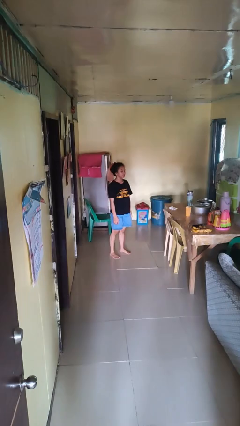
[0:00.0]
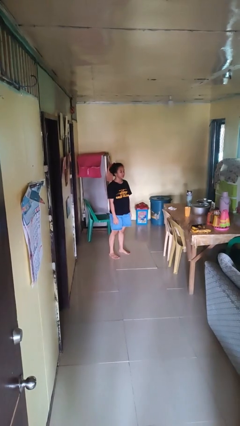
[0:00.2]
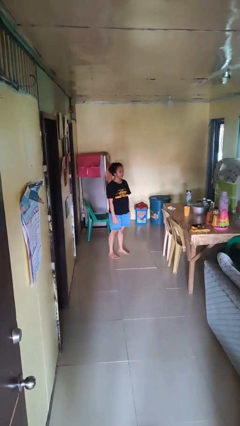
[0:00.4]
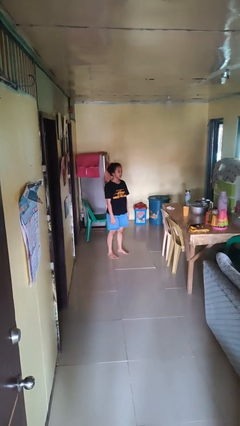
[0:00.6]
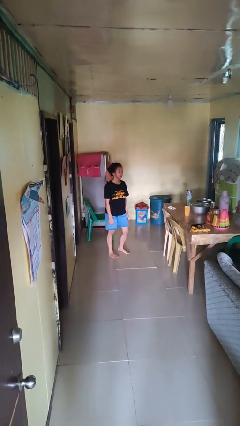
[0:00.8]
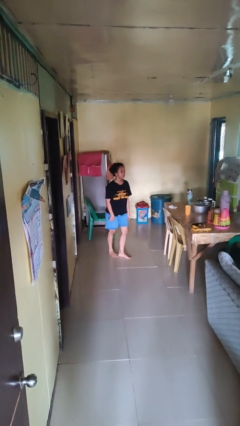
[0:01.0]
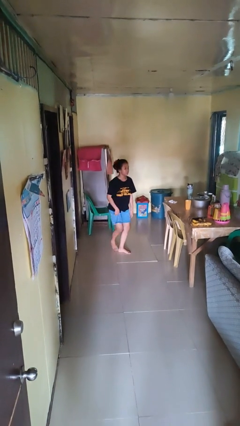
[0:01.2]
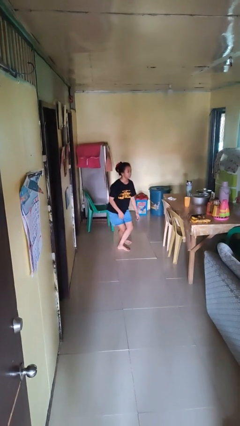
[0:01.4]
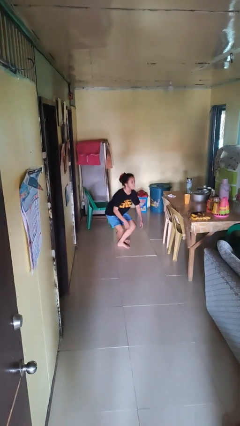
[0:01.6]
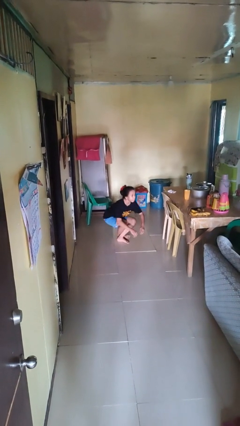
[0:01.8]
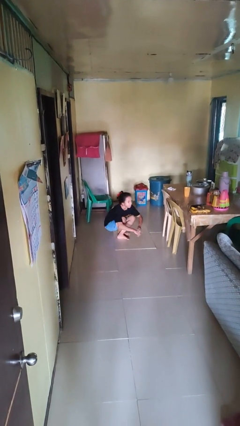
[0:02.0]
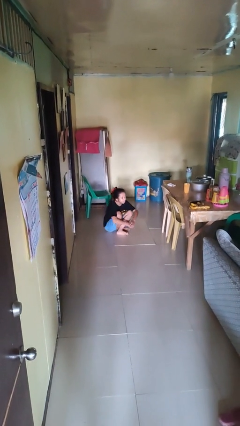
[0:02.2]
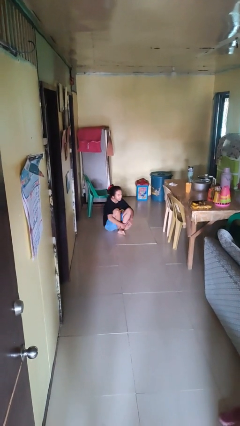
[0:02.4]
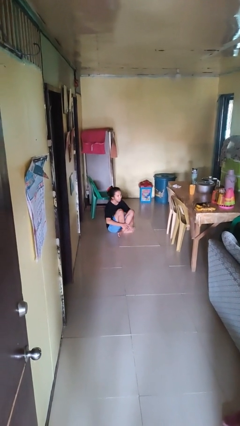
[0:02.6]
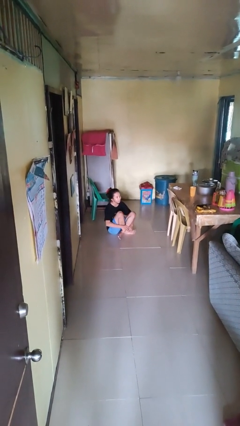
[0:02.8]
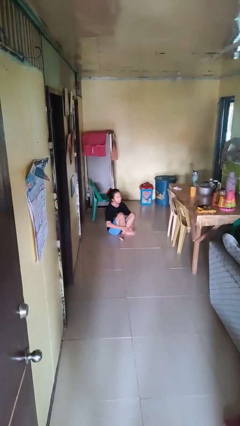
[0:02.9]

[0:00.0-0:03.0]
person sits crisscross

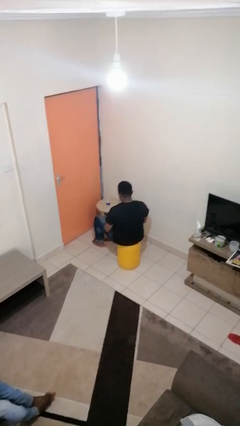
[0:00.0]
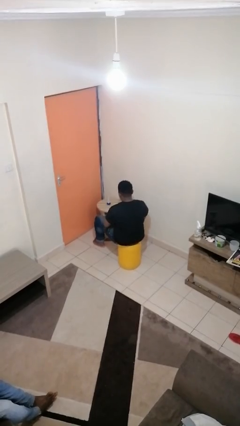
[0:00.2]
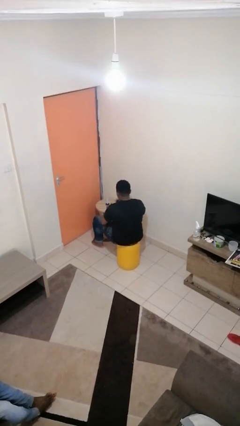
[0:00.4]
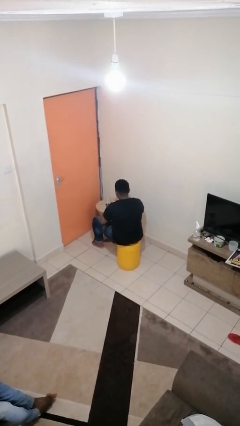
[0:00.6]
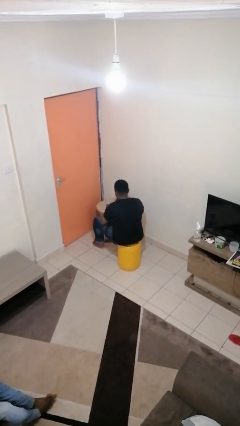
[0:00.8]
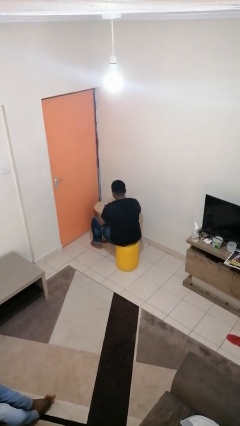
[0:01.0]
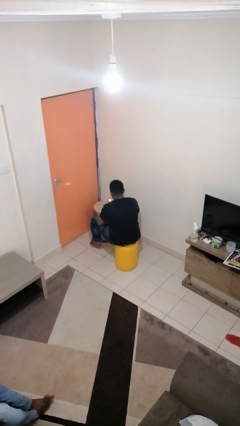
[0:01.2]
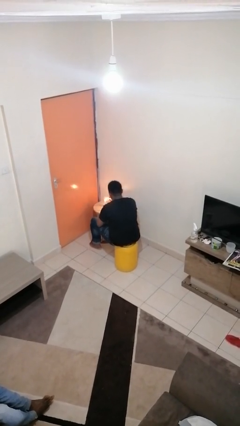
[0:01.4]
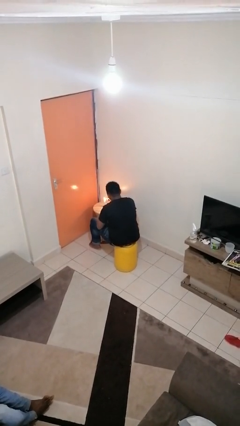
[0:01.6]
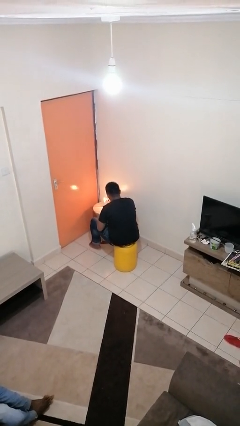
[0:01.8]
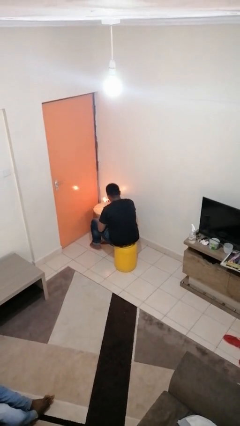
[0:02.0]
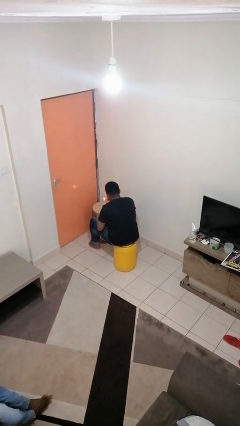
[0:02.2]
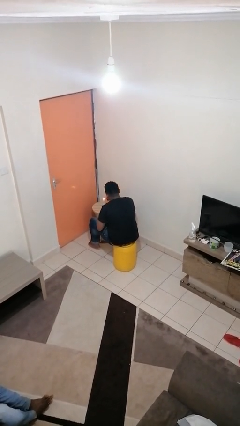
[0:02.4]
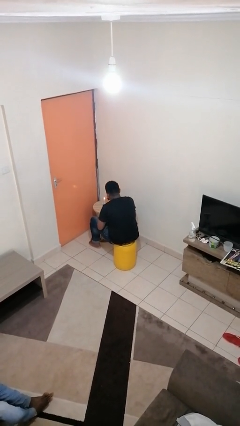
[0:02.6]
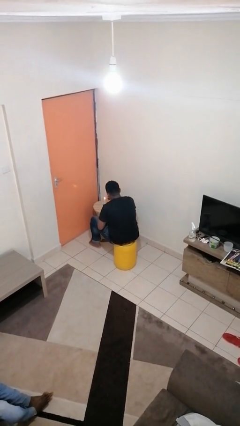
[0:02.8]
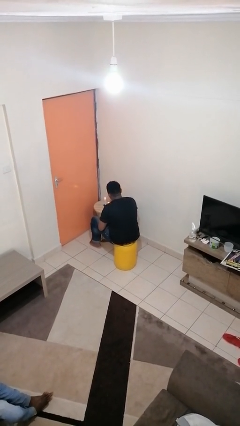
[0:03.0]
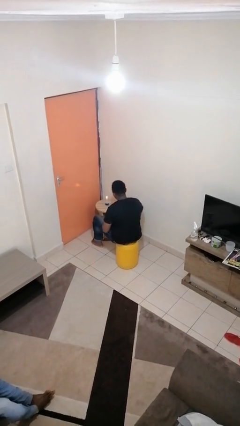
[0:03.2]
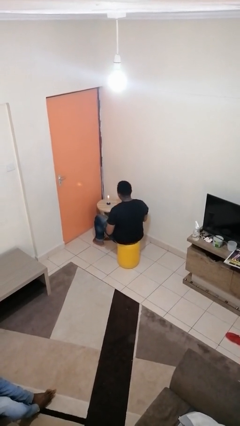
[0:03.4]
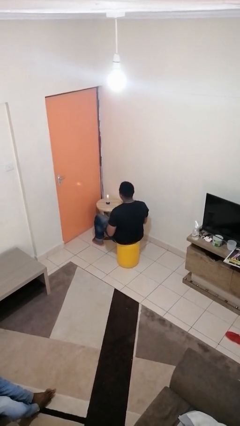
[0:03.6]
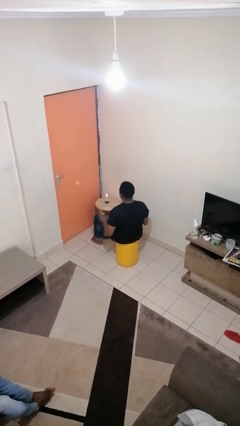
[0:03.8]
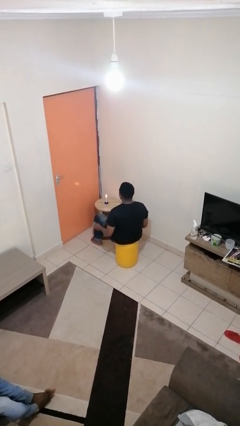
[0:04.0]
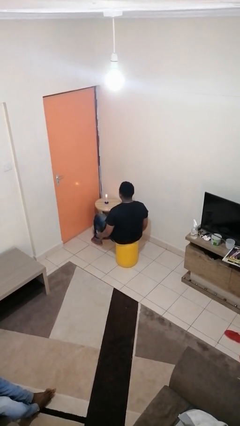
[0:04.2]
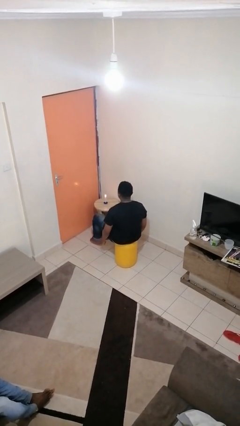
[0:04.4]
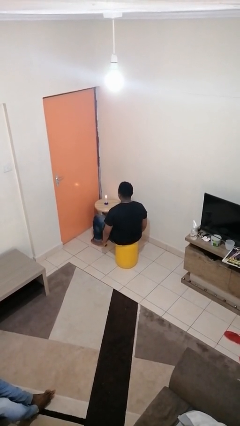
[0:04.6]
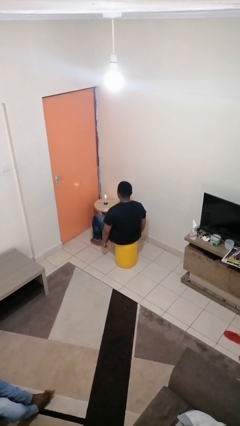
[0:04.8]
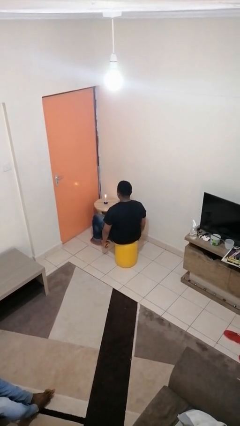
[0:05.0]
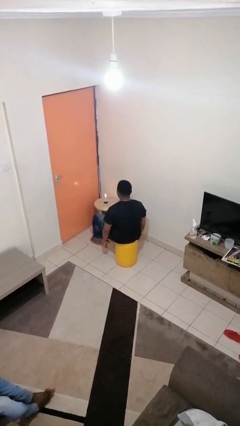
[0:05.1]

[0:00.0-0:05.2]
person lights candle

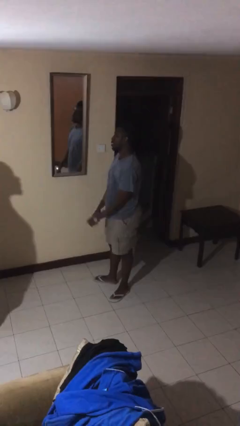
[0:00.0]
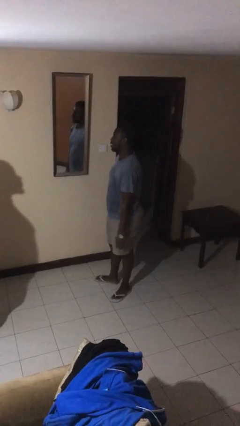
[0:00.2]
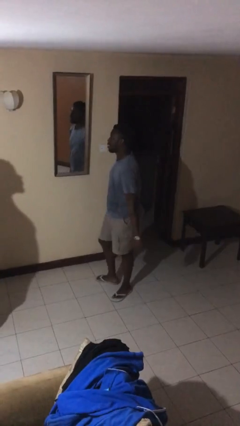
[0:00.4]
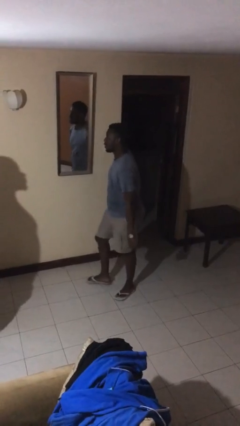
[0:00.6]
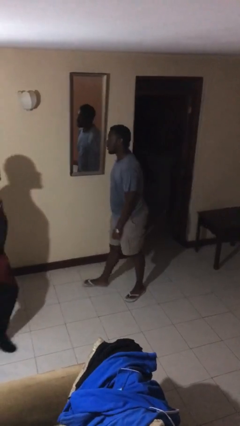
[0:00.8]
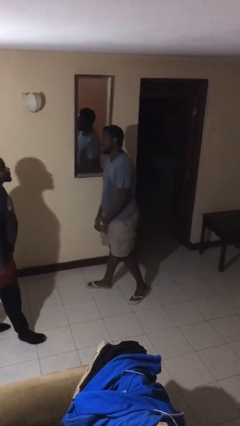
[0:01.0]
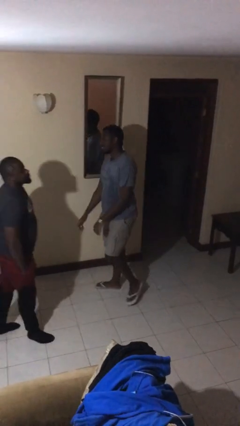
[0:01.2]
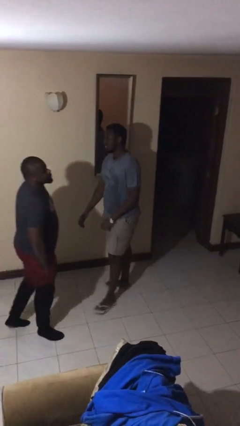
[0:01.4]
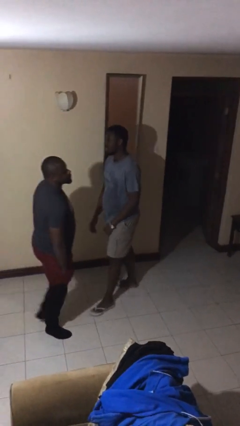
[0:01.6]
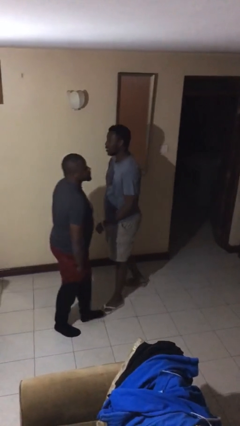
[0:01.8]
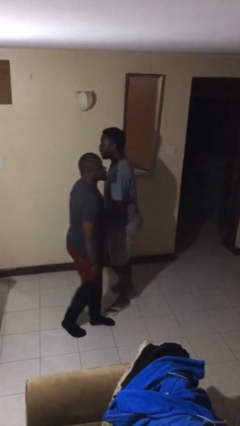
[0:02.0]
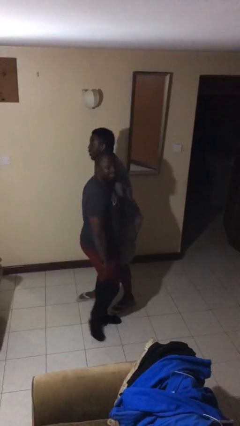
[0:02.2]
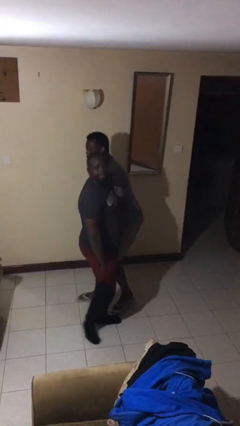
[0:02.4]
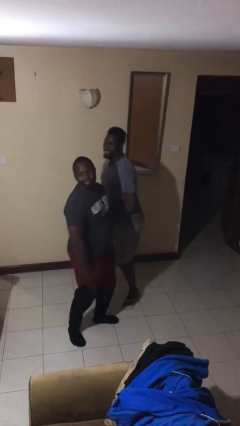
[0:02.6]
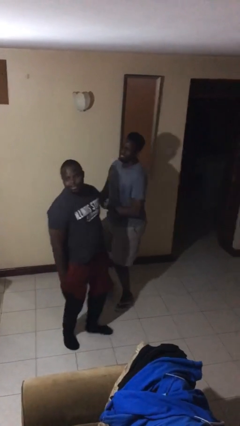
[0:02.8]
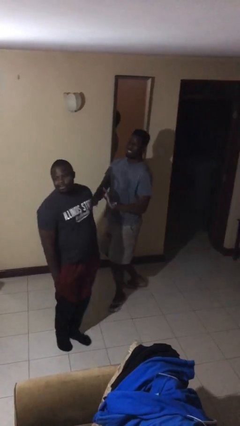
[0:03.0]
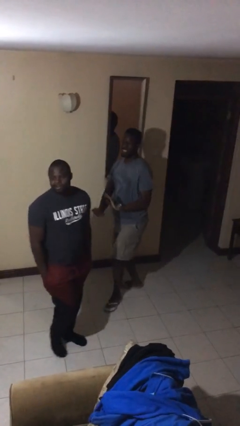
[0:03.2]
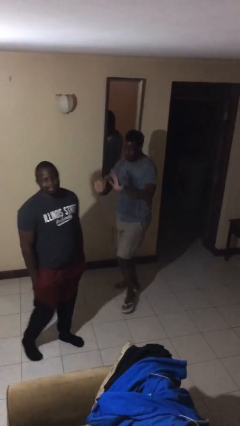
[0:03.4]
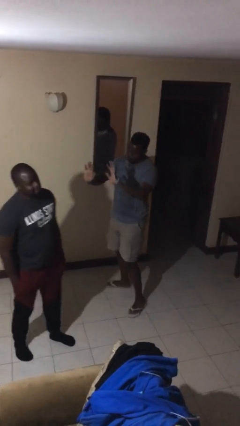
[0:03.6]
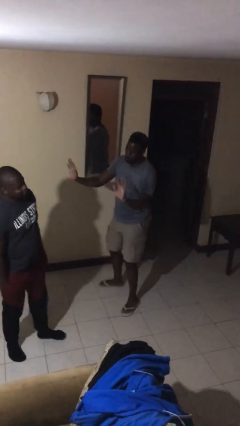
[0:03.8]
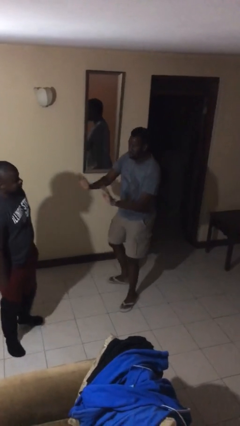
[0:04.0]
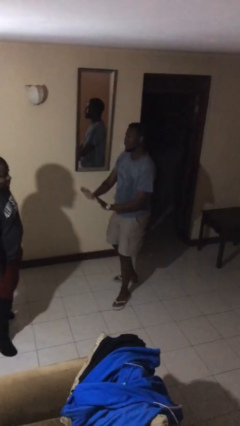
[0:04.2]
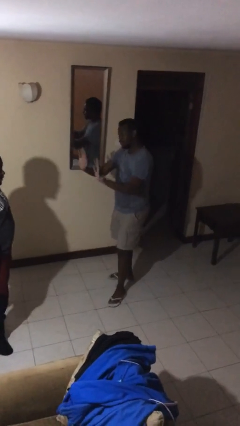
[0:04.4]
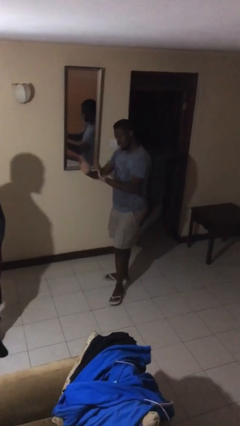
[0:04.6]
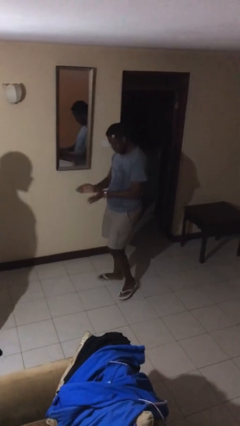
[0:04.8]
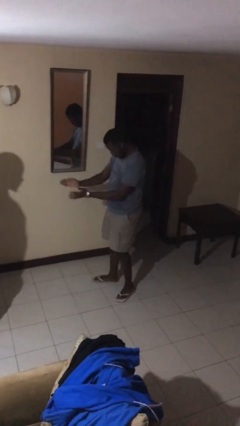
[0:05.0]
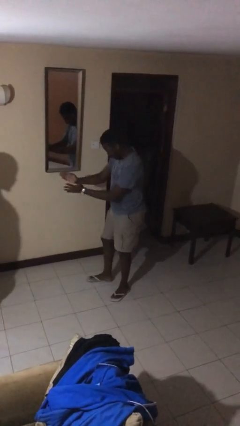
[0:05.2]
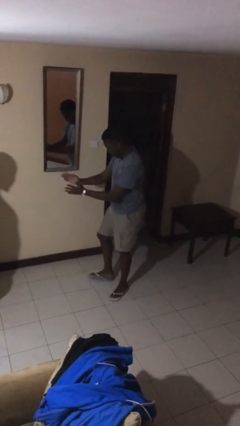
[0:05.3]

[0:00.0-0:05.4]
person bumps into person

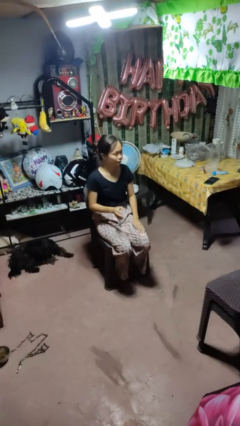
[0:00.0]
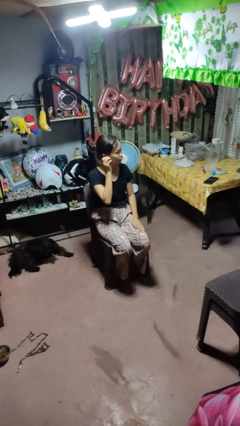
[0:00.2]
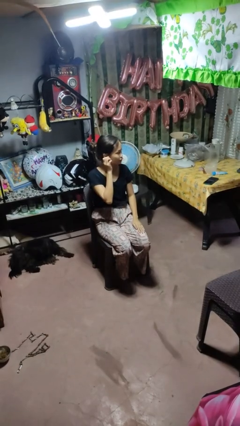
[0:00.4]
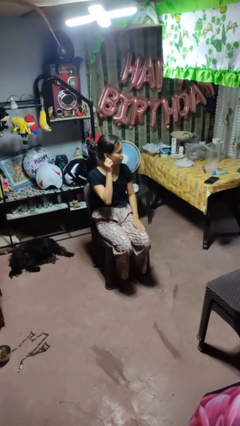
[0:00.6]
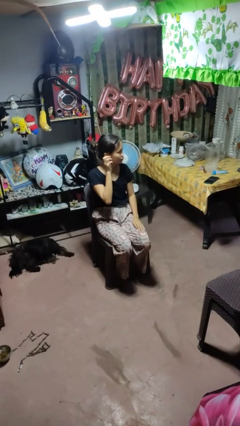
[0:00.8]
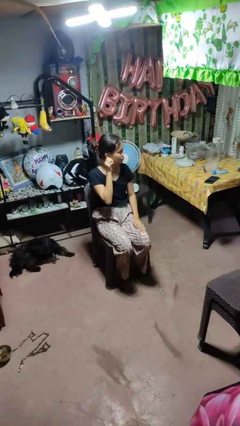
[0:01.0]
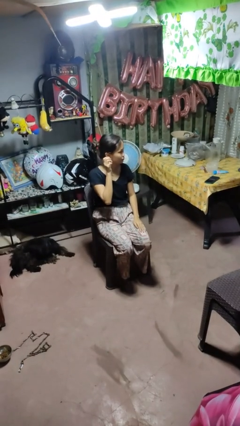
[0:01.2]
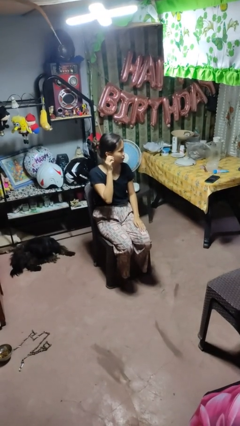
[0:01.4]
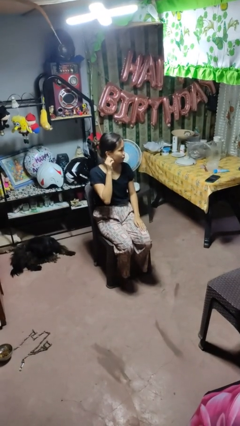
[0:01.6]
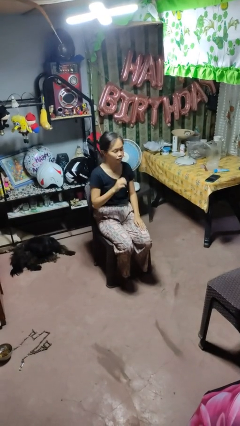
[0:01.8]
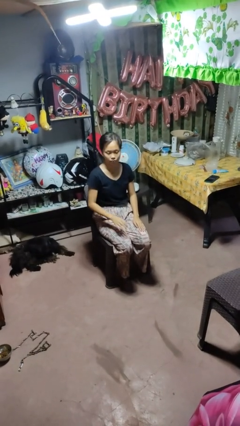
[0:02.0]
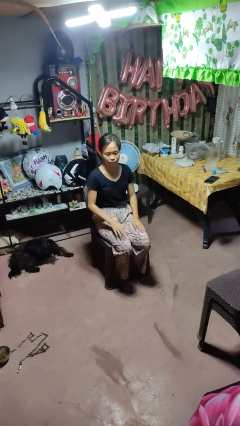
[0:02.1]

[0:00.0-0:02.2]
person touches earlobe

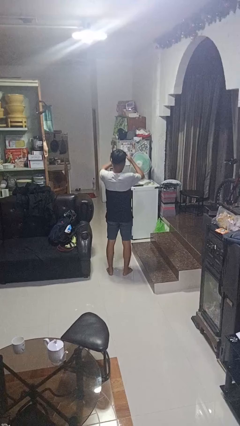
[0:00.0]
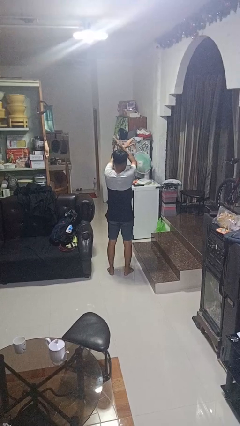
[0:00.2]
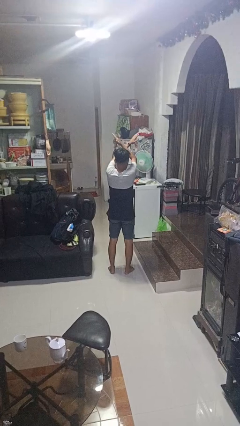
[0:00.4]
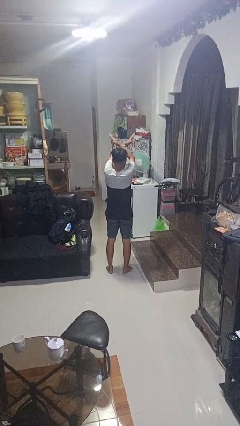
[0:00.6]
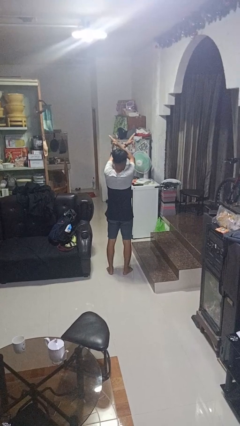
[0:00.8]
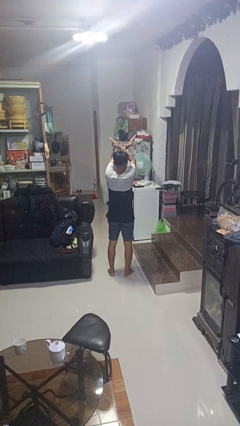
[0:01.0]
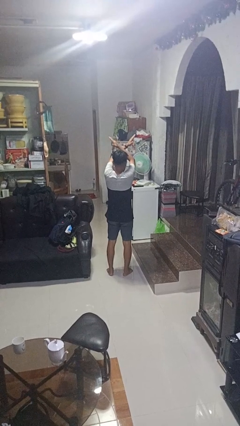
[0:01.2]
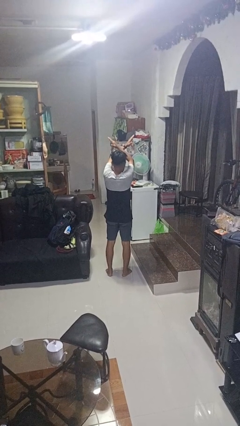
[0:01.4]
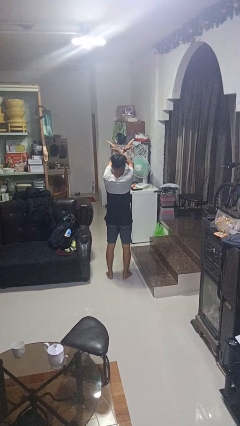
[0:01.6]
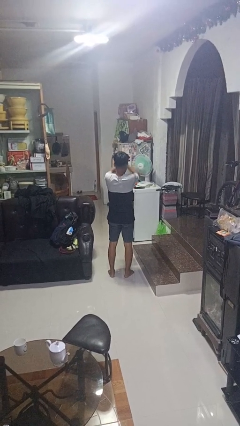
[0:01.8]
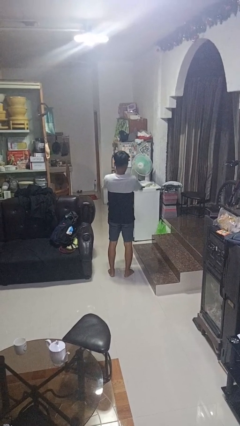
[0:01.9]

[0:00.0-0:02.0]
person gestures arms x
